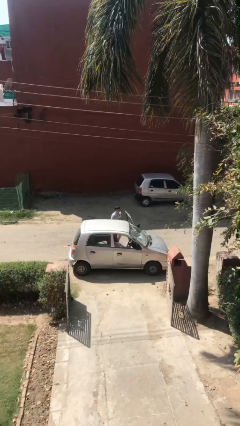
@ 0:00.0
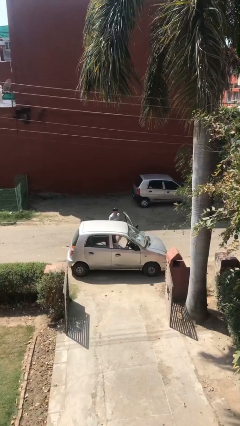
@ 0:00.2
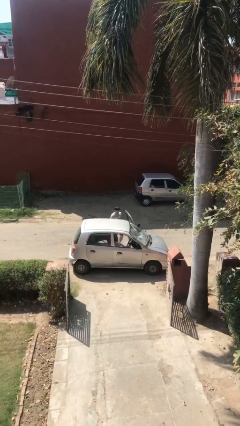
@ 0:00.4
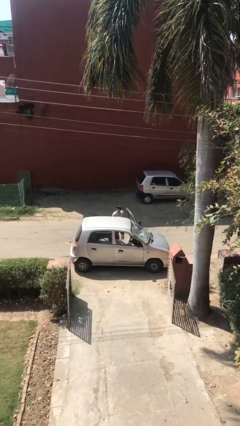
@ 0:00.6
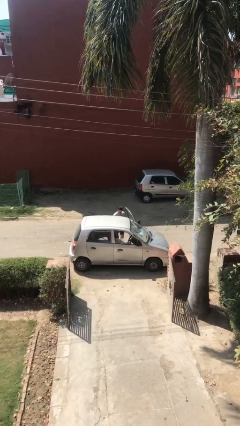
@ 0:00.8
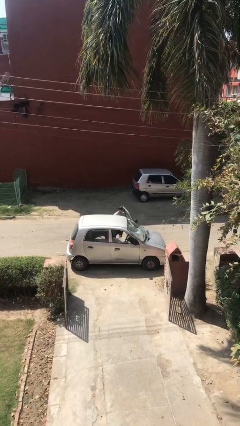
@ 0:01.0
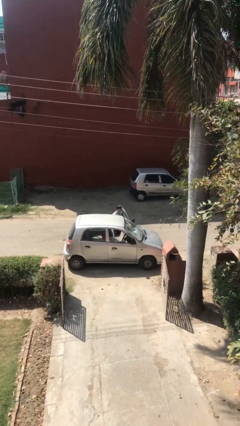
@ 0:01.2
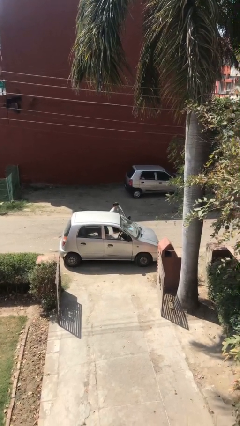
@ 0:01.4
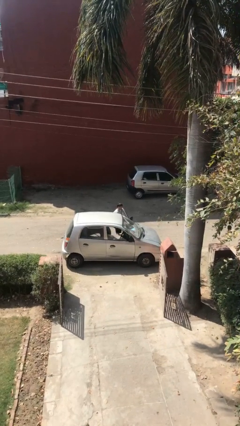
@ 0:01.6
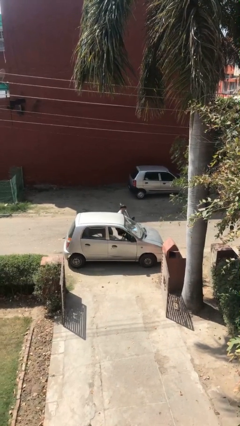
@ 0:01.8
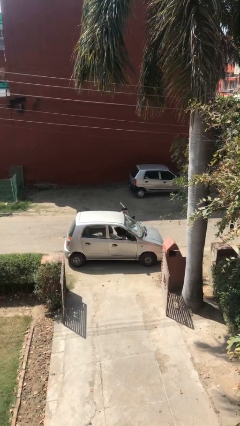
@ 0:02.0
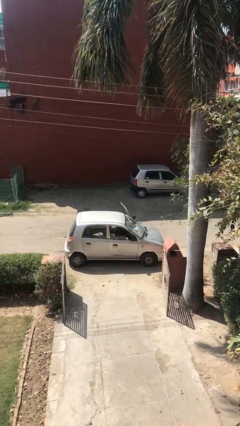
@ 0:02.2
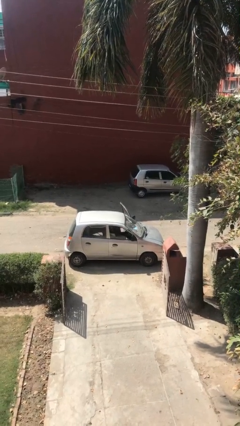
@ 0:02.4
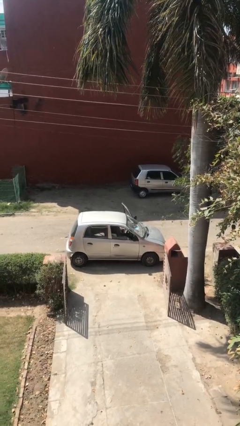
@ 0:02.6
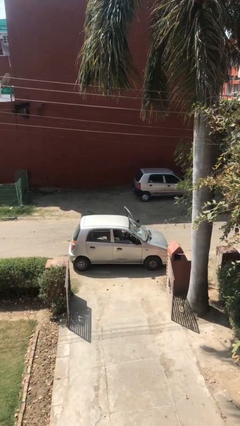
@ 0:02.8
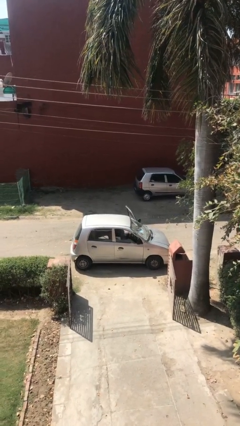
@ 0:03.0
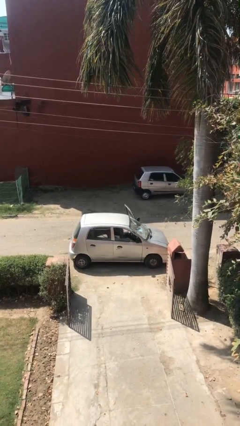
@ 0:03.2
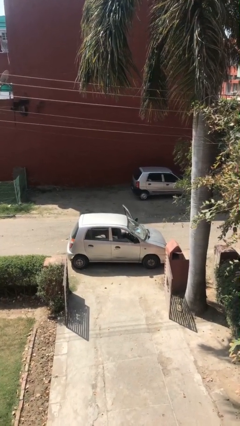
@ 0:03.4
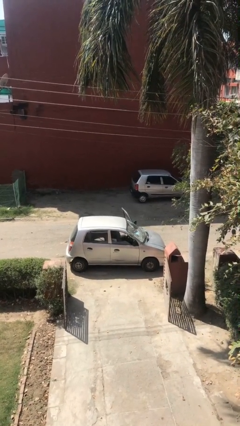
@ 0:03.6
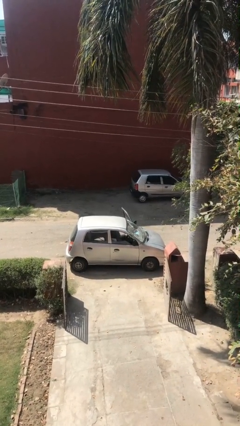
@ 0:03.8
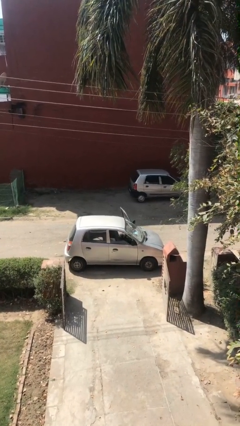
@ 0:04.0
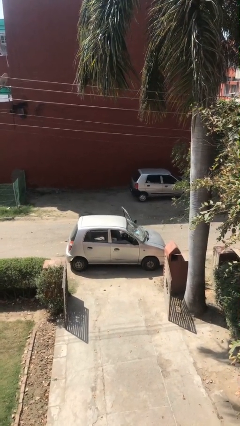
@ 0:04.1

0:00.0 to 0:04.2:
person enters car

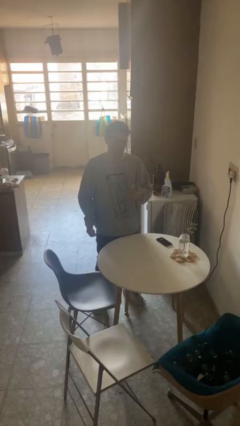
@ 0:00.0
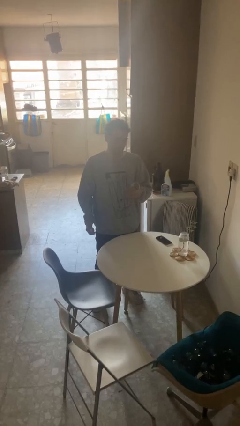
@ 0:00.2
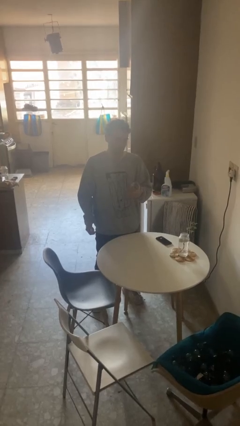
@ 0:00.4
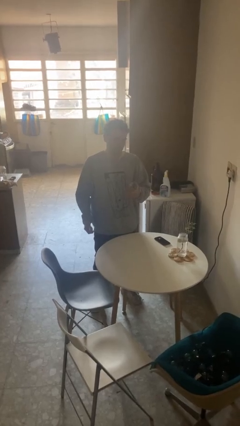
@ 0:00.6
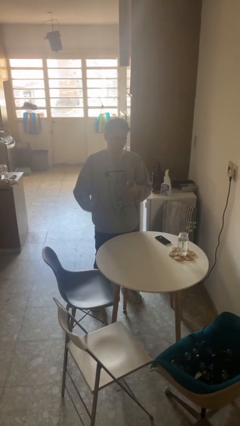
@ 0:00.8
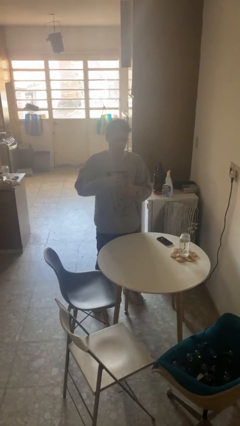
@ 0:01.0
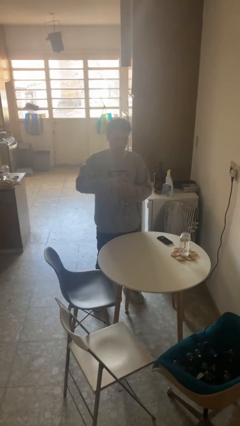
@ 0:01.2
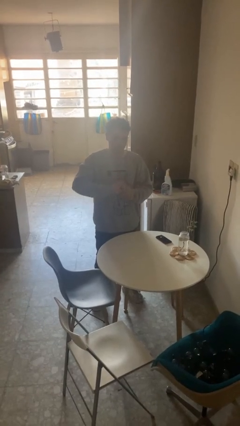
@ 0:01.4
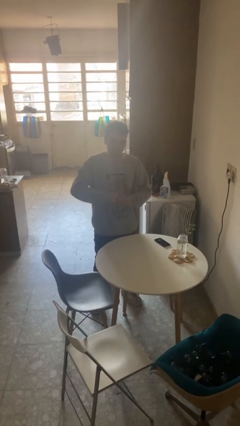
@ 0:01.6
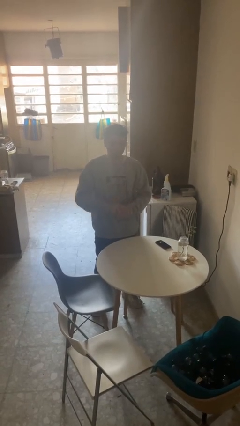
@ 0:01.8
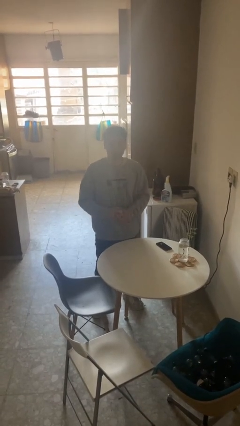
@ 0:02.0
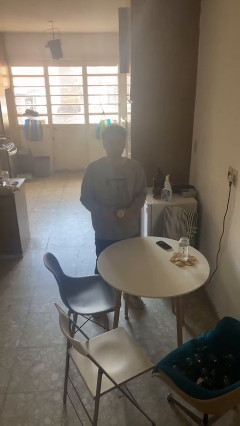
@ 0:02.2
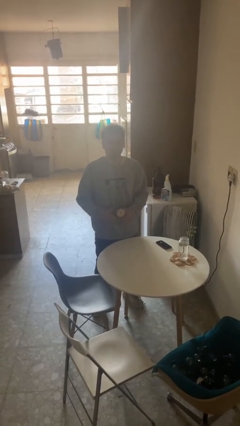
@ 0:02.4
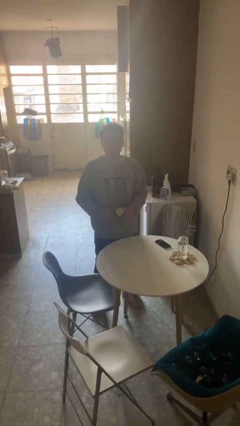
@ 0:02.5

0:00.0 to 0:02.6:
person closes jar

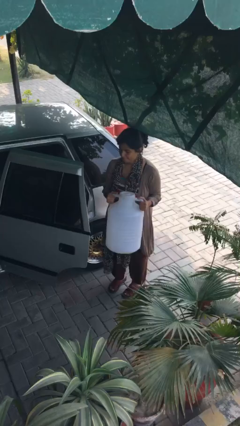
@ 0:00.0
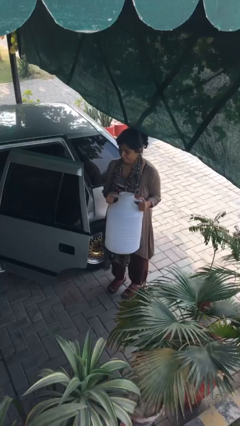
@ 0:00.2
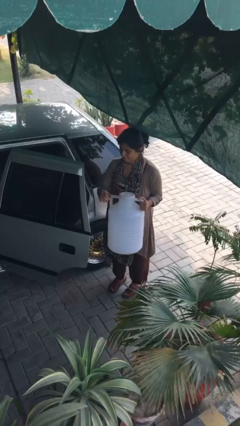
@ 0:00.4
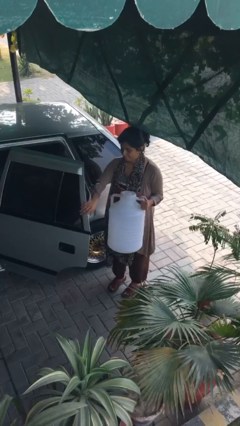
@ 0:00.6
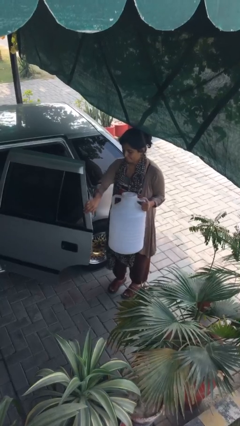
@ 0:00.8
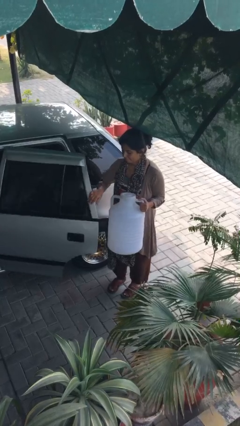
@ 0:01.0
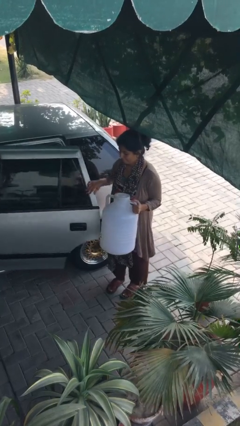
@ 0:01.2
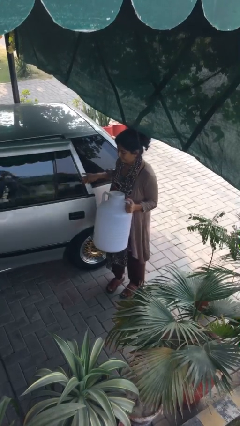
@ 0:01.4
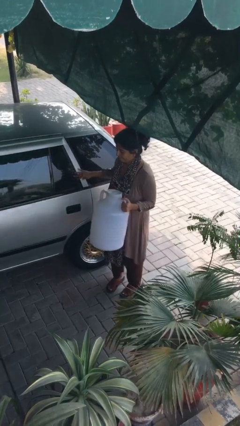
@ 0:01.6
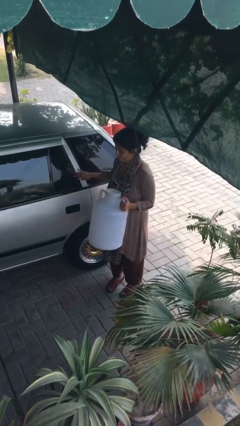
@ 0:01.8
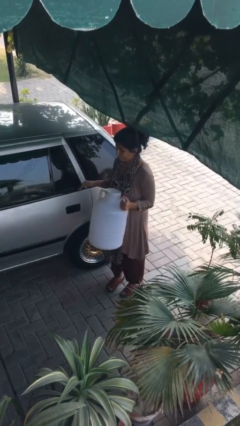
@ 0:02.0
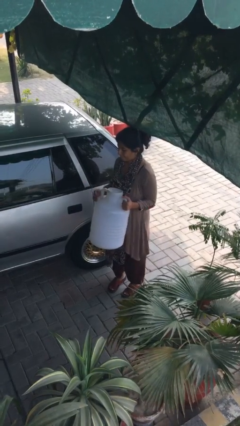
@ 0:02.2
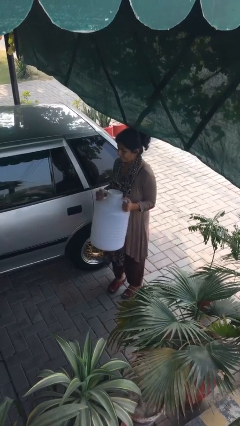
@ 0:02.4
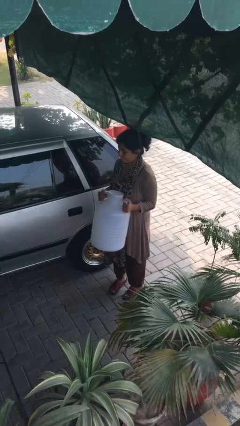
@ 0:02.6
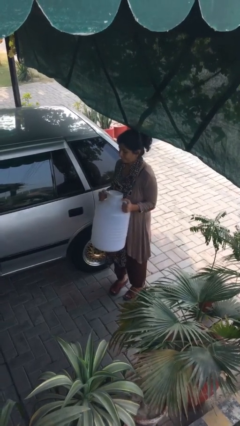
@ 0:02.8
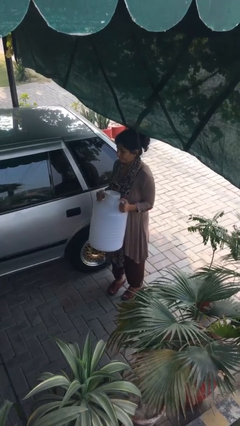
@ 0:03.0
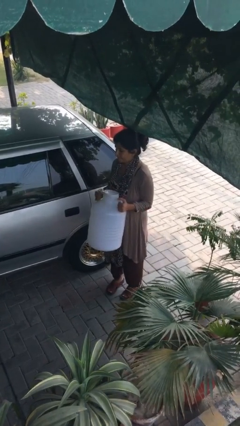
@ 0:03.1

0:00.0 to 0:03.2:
person closes car door

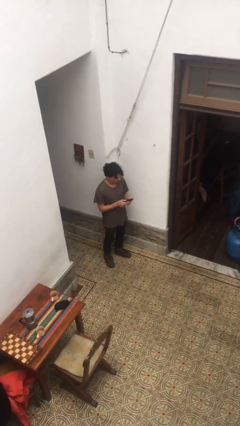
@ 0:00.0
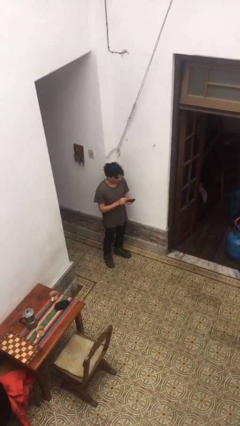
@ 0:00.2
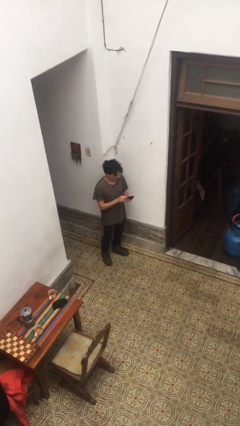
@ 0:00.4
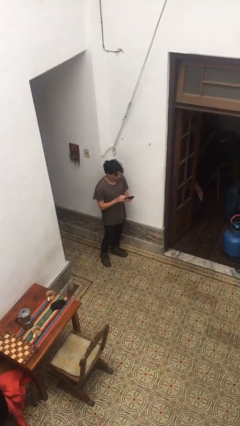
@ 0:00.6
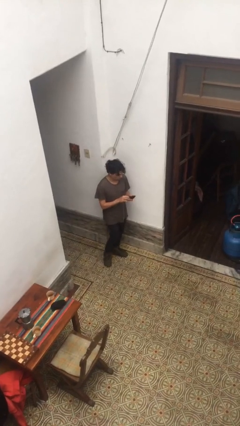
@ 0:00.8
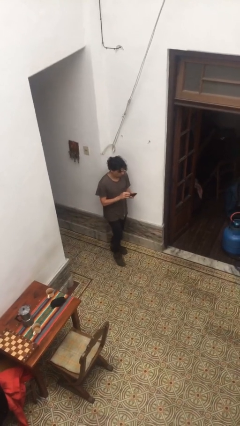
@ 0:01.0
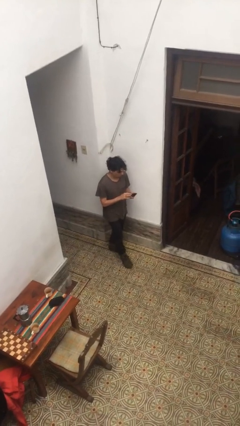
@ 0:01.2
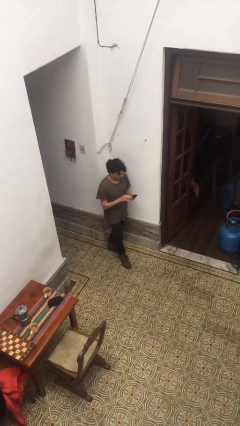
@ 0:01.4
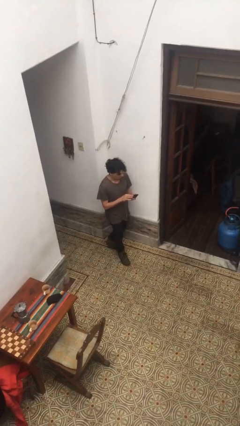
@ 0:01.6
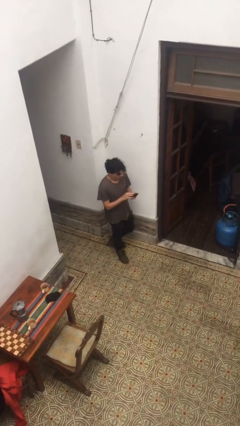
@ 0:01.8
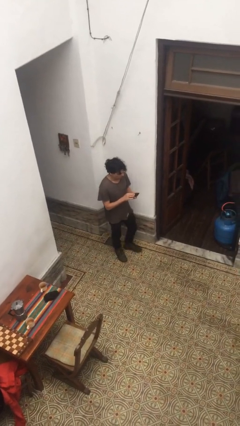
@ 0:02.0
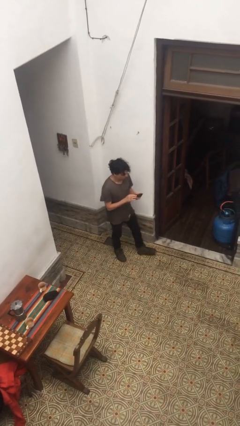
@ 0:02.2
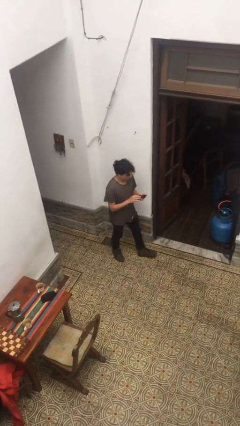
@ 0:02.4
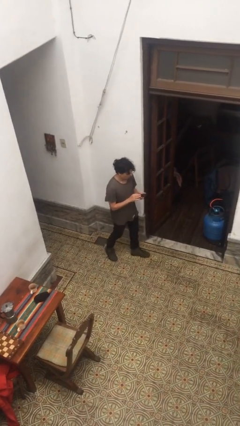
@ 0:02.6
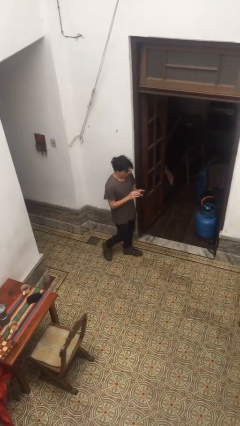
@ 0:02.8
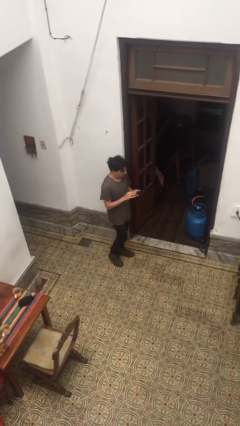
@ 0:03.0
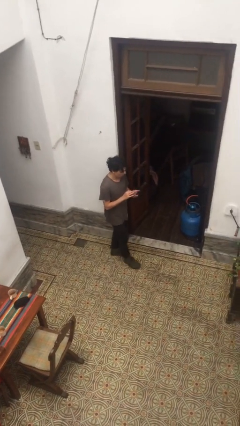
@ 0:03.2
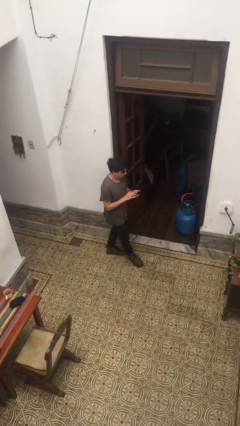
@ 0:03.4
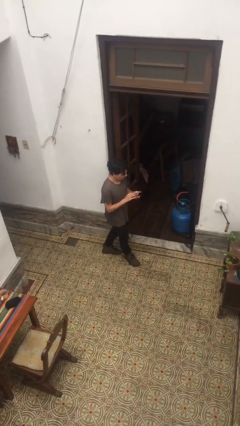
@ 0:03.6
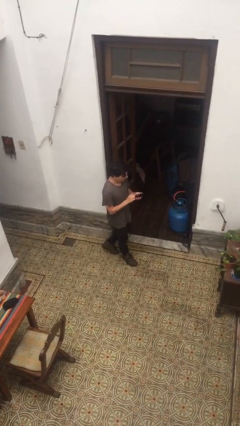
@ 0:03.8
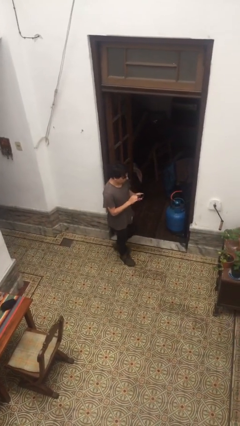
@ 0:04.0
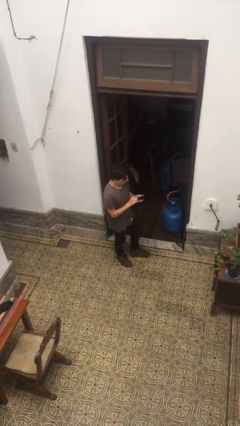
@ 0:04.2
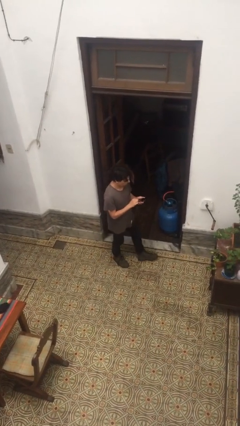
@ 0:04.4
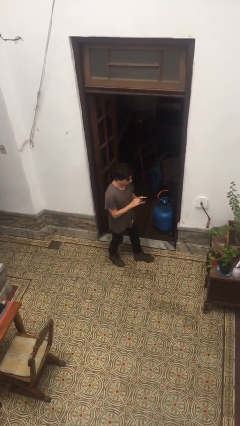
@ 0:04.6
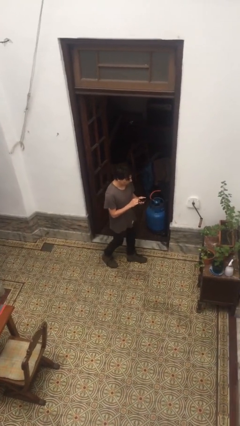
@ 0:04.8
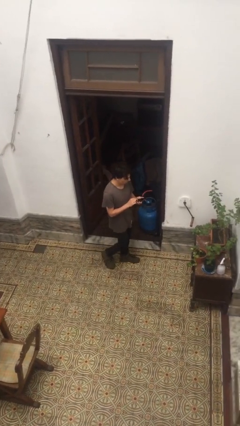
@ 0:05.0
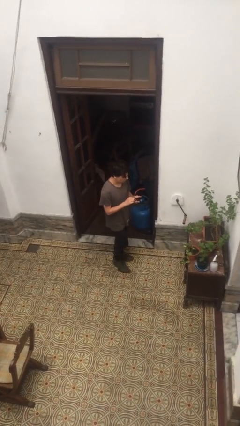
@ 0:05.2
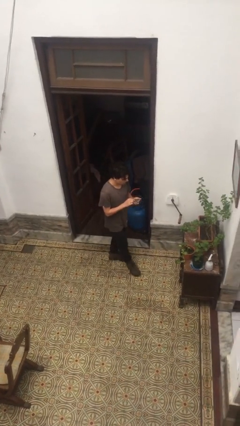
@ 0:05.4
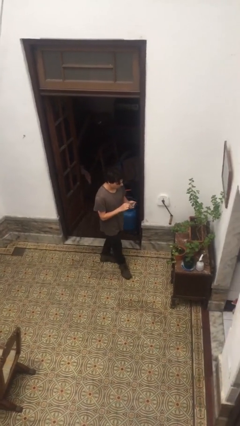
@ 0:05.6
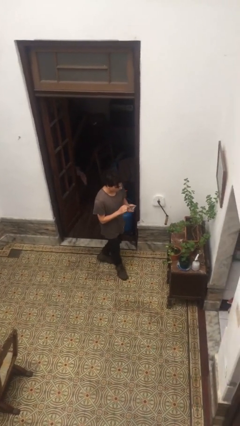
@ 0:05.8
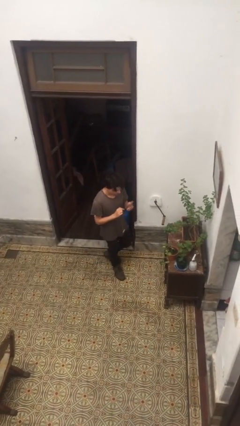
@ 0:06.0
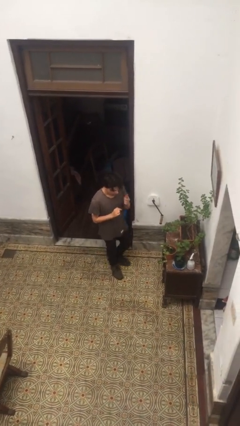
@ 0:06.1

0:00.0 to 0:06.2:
person texts on phone

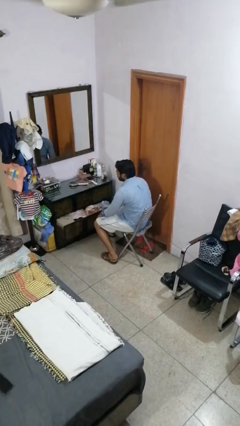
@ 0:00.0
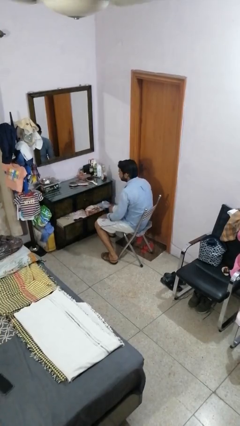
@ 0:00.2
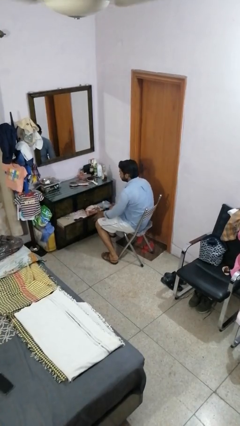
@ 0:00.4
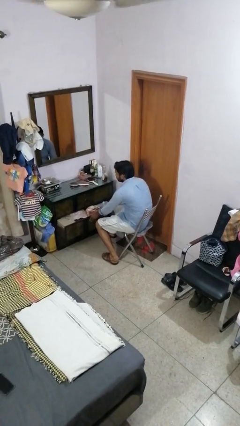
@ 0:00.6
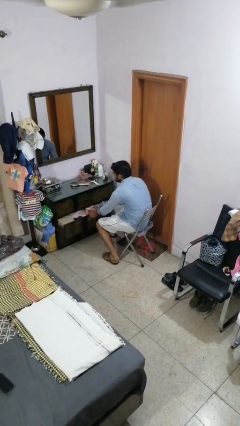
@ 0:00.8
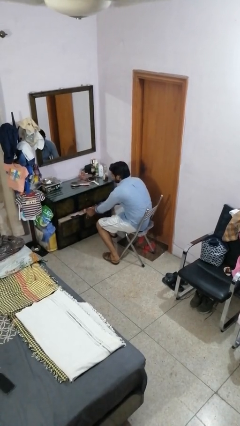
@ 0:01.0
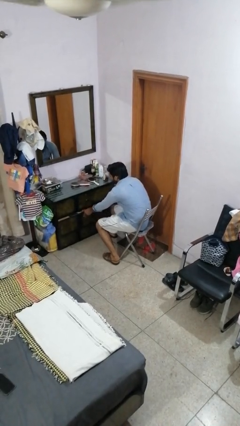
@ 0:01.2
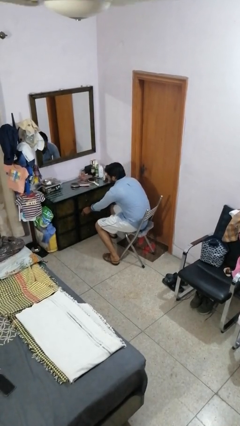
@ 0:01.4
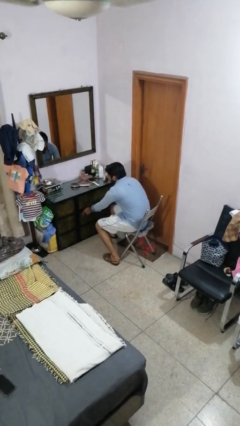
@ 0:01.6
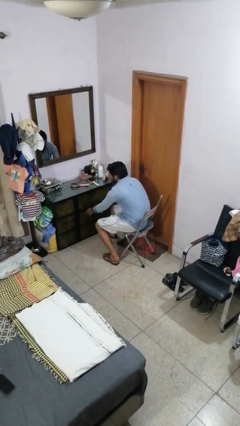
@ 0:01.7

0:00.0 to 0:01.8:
person closes dresser drawer
